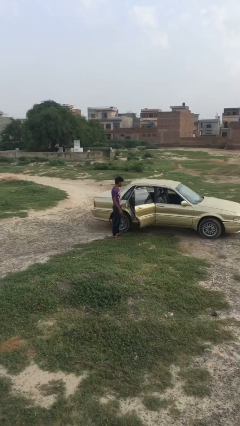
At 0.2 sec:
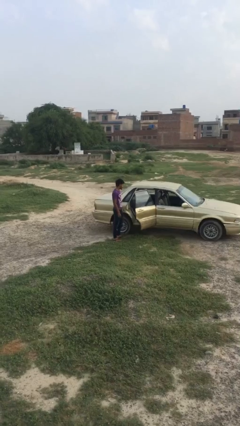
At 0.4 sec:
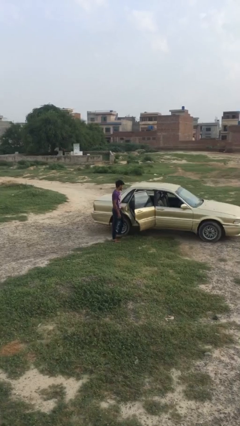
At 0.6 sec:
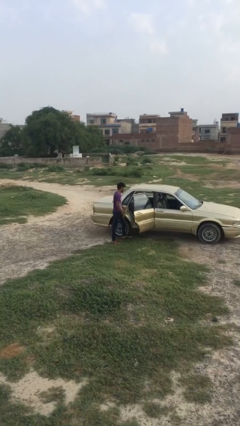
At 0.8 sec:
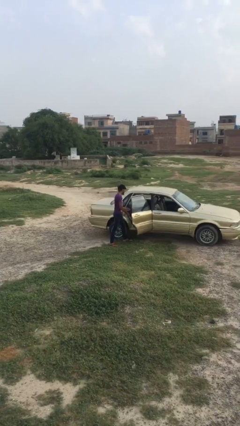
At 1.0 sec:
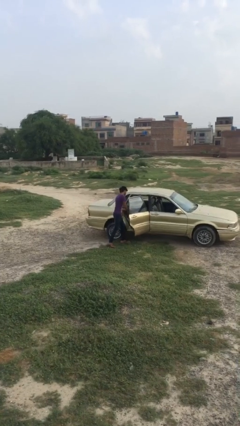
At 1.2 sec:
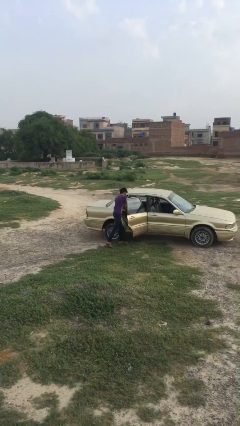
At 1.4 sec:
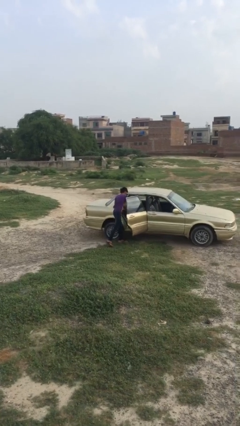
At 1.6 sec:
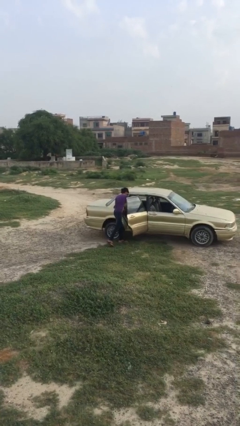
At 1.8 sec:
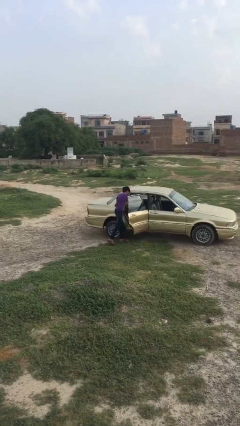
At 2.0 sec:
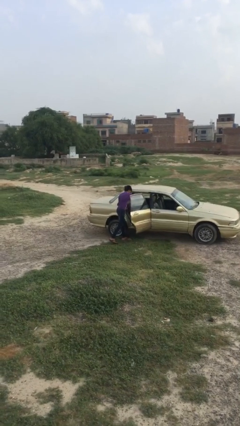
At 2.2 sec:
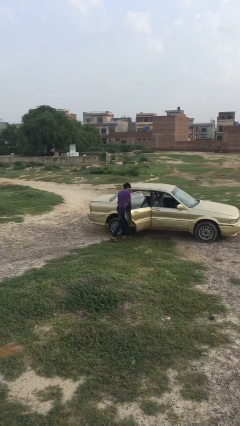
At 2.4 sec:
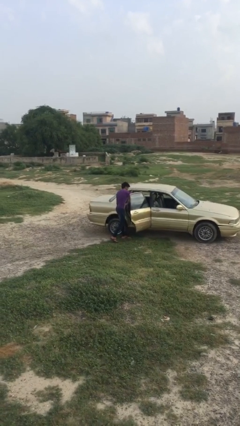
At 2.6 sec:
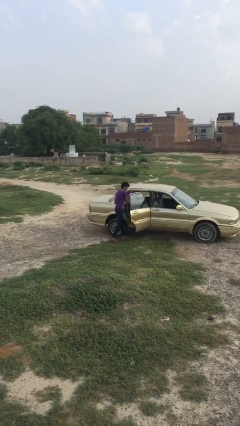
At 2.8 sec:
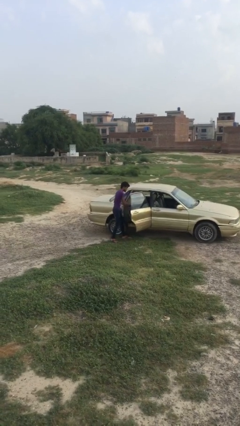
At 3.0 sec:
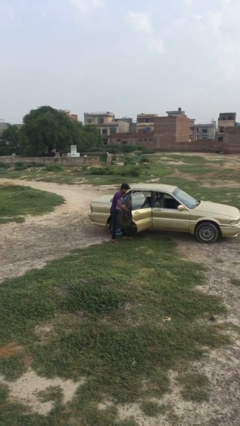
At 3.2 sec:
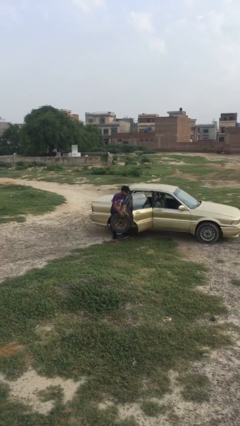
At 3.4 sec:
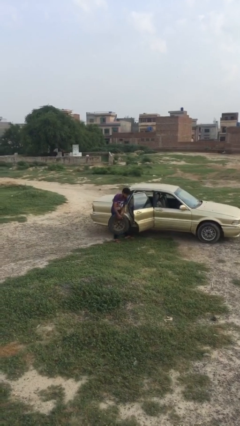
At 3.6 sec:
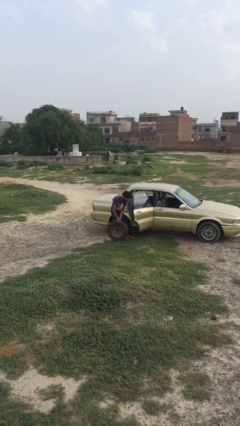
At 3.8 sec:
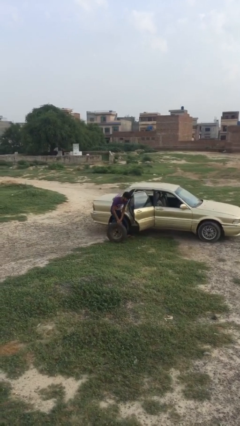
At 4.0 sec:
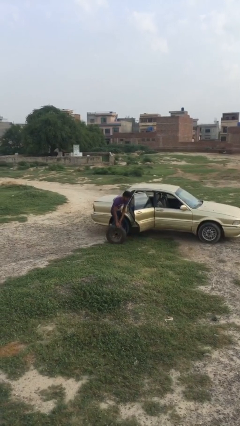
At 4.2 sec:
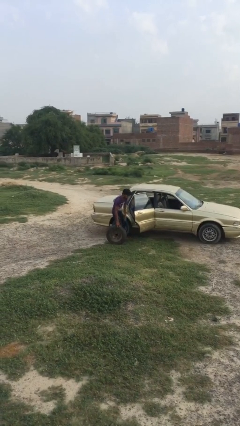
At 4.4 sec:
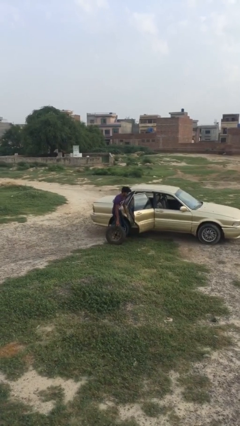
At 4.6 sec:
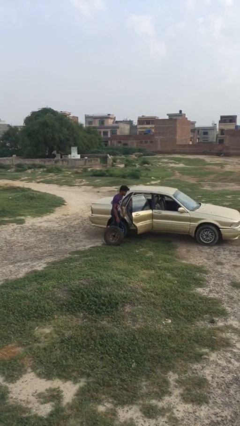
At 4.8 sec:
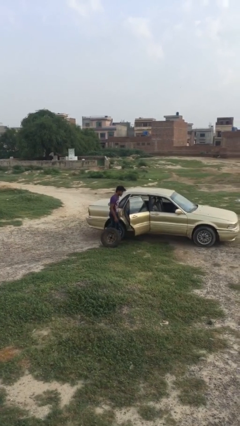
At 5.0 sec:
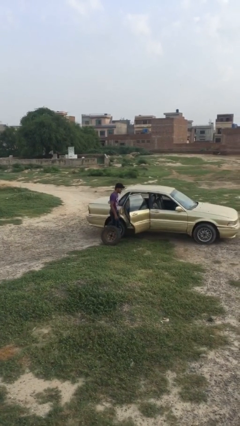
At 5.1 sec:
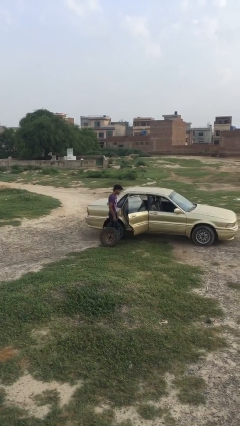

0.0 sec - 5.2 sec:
person unloads car

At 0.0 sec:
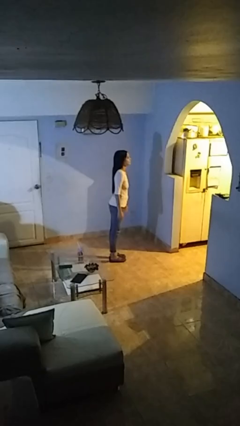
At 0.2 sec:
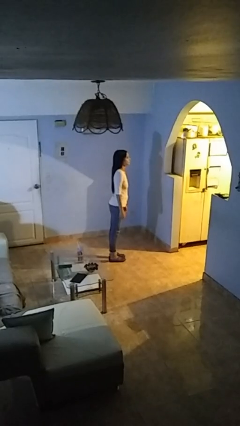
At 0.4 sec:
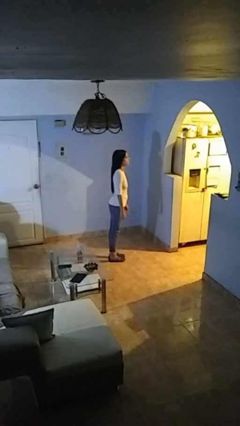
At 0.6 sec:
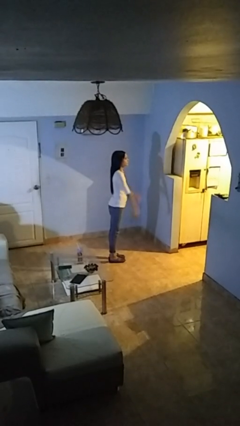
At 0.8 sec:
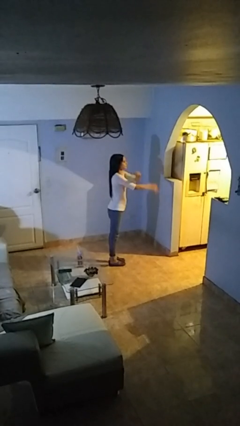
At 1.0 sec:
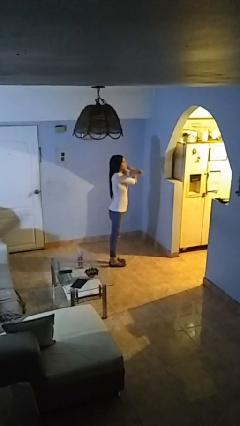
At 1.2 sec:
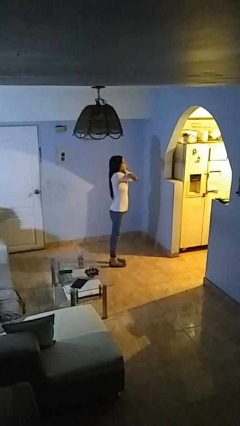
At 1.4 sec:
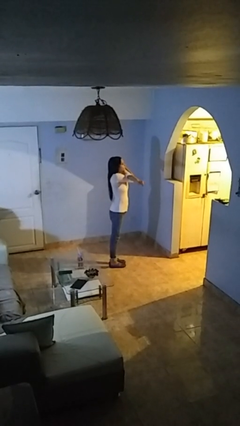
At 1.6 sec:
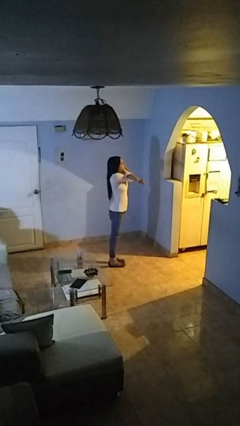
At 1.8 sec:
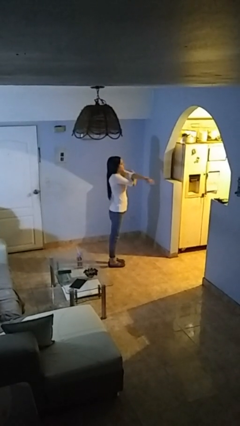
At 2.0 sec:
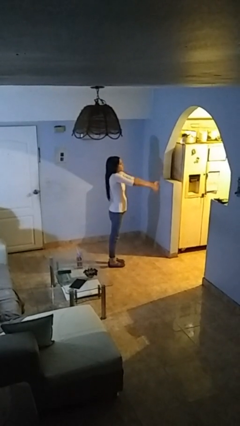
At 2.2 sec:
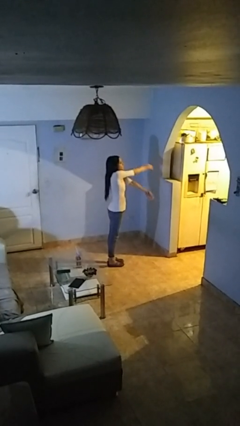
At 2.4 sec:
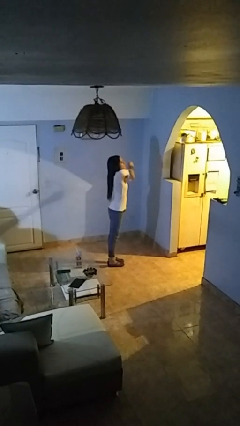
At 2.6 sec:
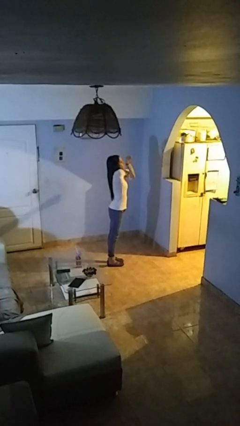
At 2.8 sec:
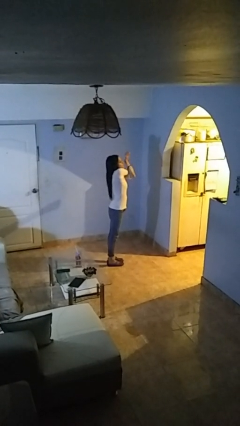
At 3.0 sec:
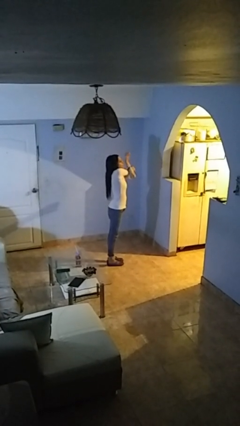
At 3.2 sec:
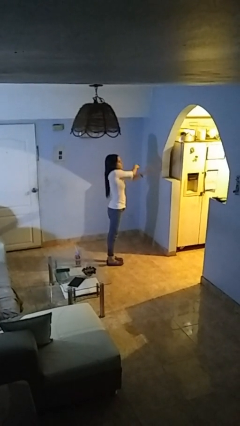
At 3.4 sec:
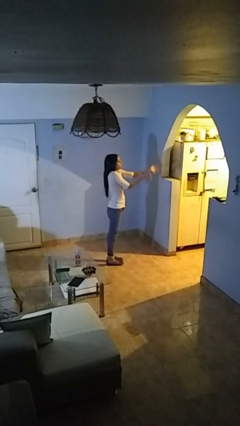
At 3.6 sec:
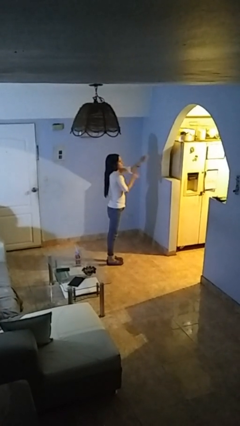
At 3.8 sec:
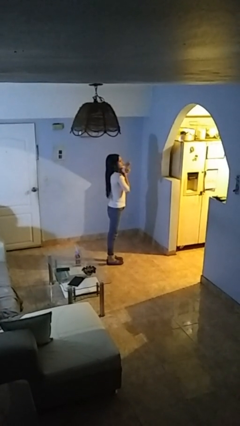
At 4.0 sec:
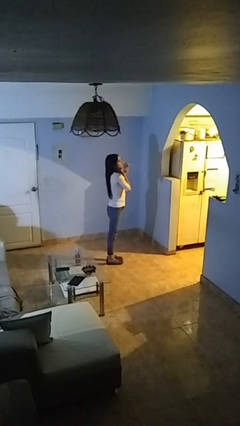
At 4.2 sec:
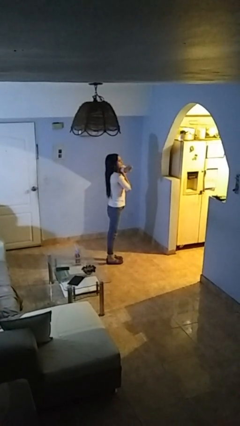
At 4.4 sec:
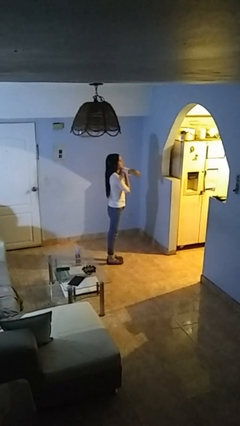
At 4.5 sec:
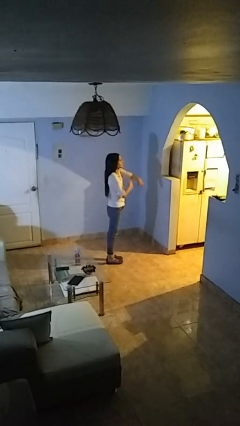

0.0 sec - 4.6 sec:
person stretches arms to side

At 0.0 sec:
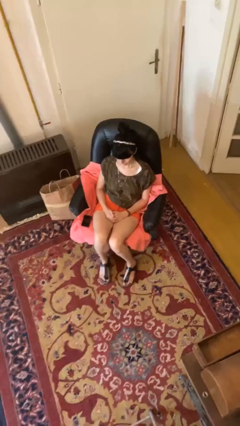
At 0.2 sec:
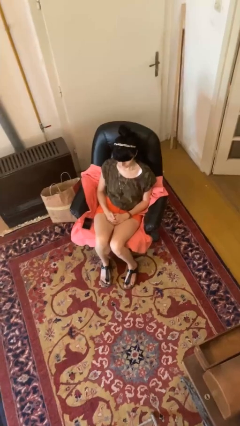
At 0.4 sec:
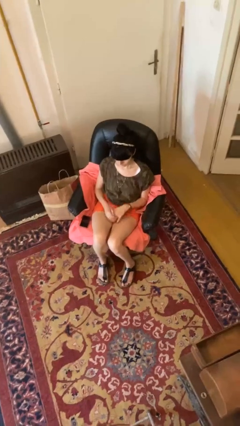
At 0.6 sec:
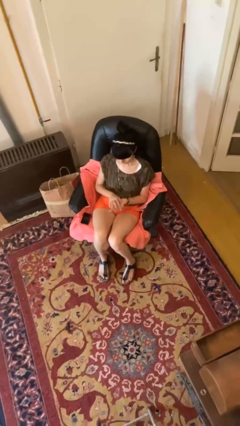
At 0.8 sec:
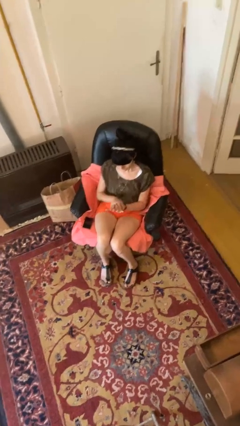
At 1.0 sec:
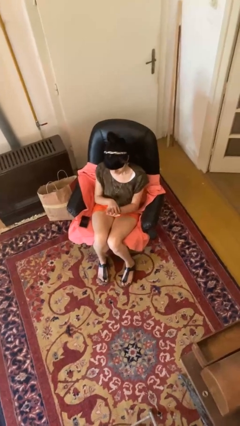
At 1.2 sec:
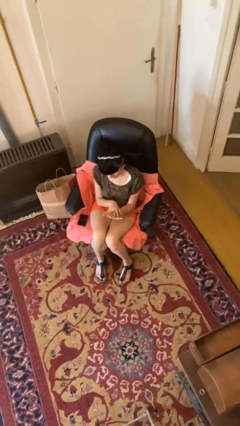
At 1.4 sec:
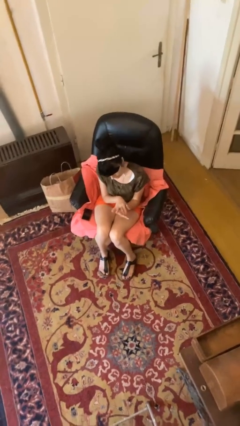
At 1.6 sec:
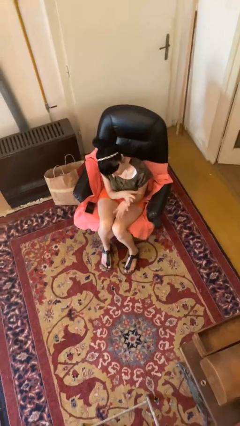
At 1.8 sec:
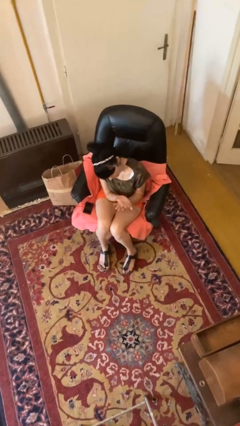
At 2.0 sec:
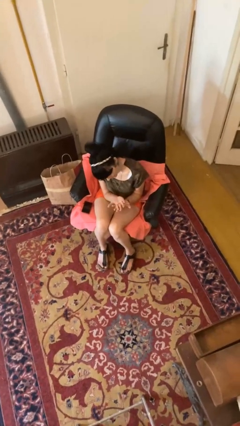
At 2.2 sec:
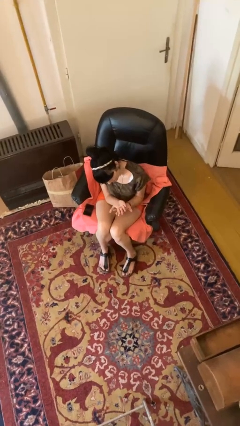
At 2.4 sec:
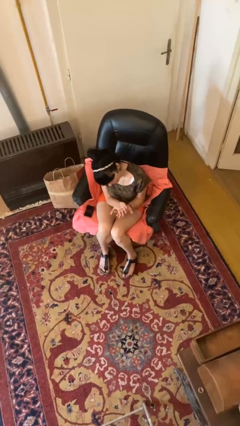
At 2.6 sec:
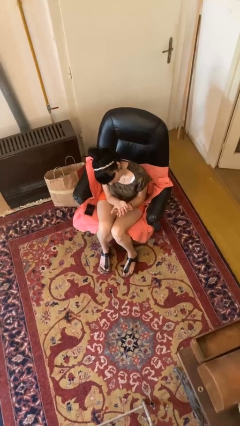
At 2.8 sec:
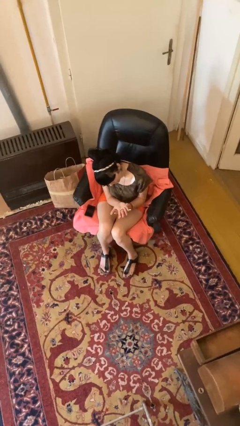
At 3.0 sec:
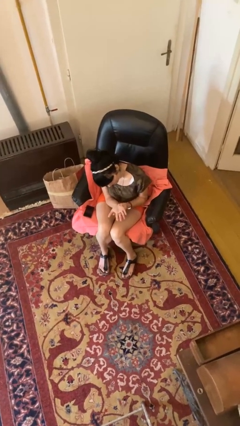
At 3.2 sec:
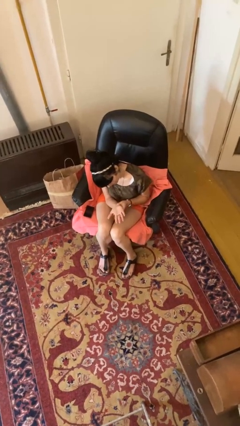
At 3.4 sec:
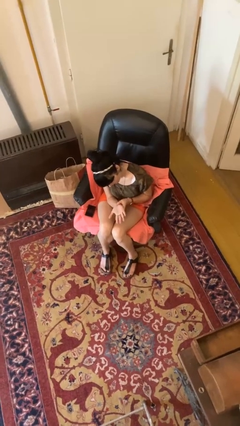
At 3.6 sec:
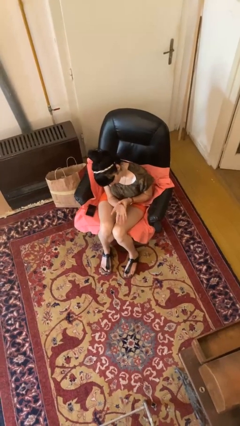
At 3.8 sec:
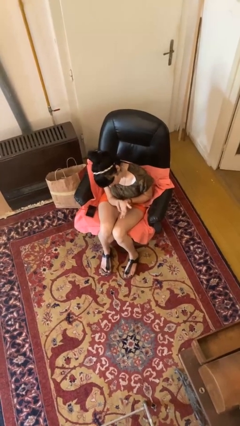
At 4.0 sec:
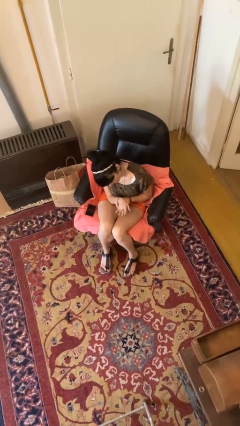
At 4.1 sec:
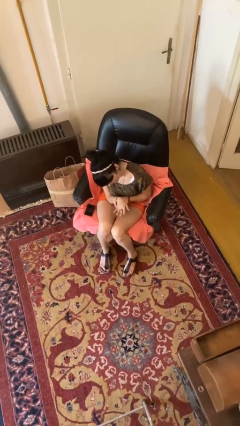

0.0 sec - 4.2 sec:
person looks at hands in lap

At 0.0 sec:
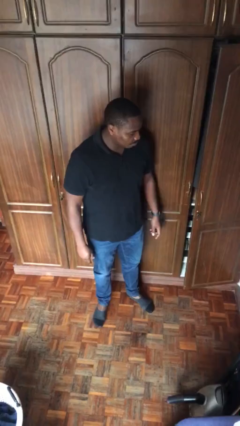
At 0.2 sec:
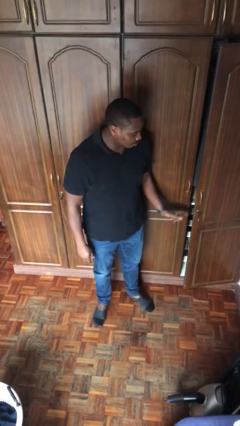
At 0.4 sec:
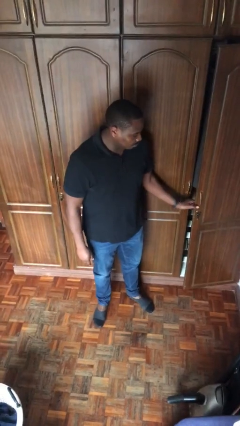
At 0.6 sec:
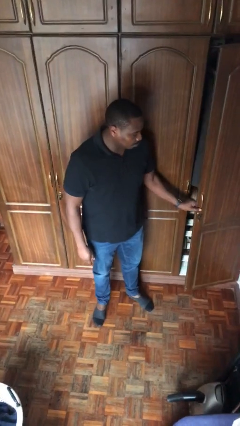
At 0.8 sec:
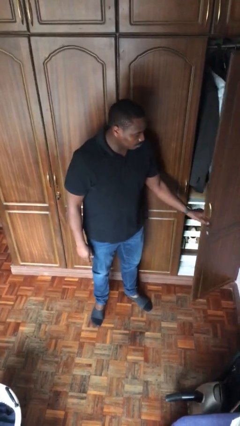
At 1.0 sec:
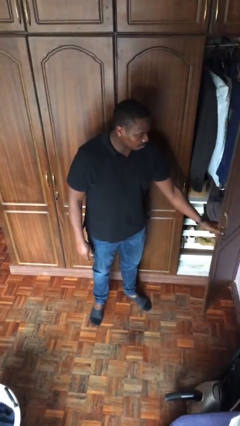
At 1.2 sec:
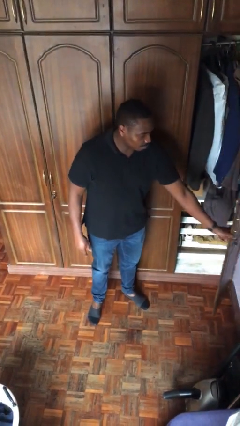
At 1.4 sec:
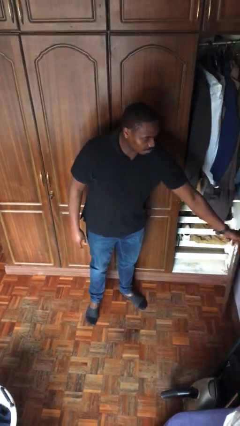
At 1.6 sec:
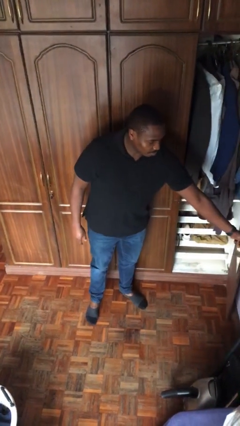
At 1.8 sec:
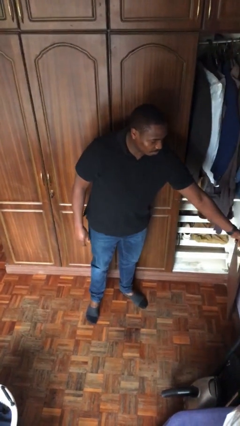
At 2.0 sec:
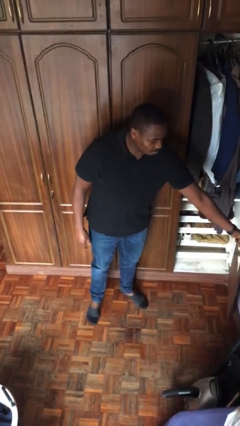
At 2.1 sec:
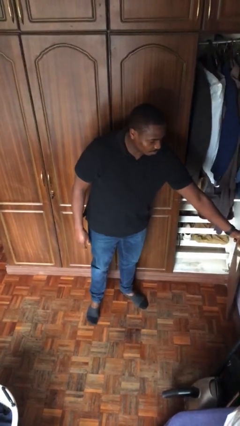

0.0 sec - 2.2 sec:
person opens closet door

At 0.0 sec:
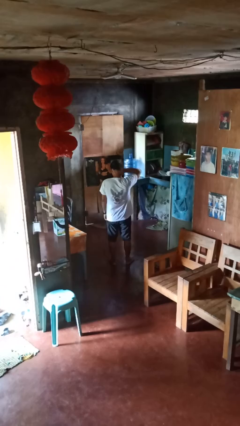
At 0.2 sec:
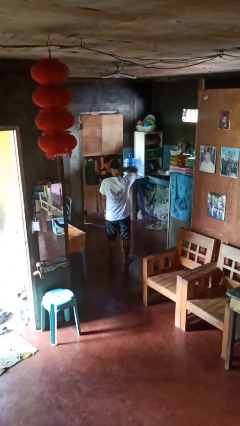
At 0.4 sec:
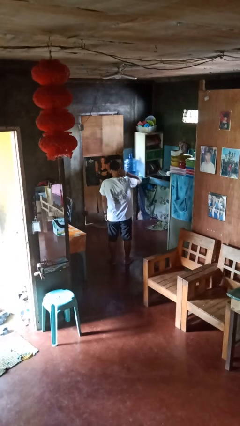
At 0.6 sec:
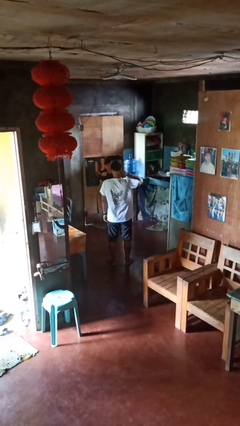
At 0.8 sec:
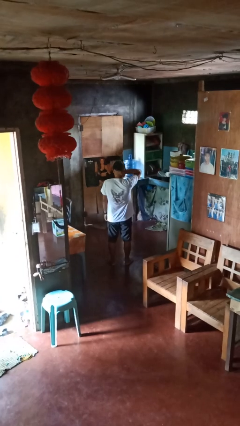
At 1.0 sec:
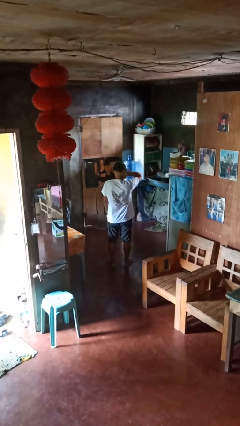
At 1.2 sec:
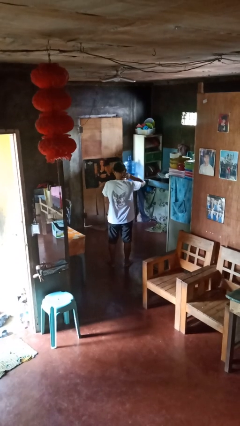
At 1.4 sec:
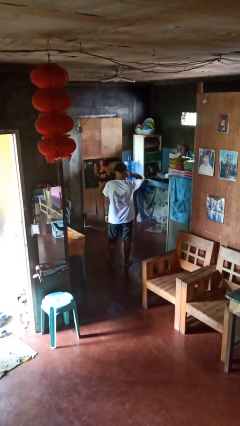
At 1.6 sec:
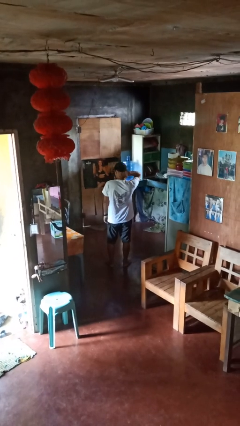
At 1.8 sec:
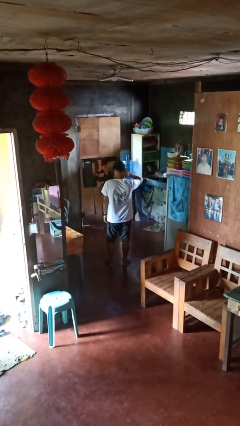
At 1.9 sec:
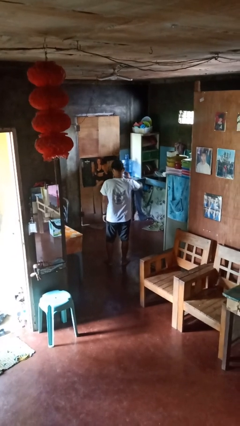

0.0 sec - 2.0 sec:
person rubs neck
